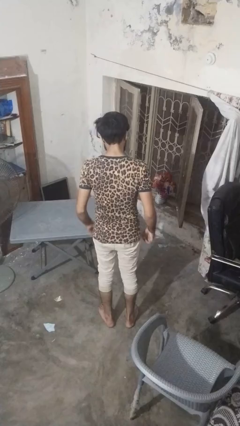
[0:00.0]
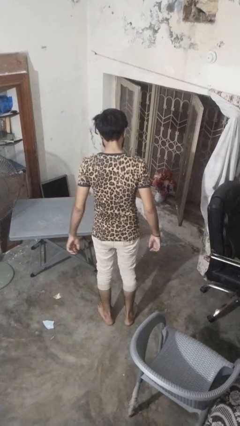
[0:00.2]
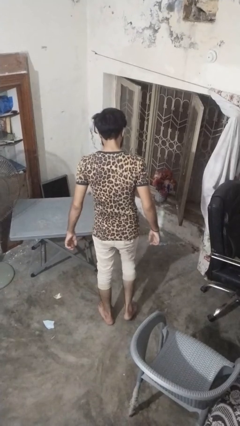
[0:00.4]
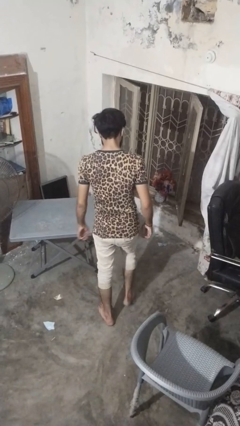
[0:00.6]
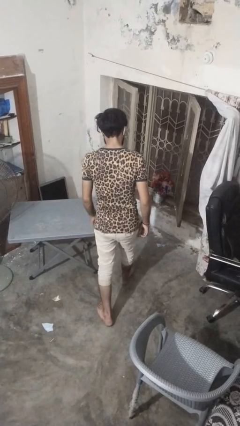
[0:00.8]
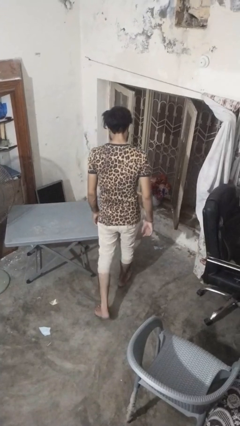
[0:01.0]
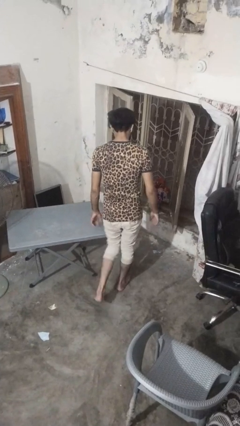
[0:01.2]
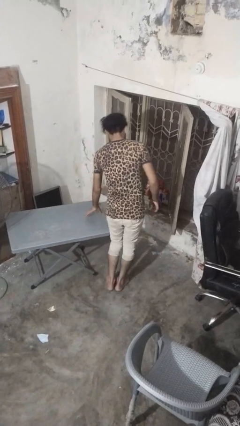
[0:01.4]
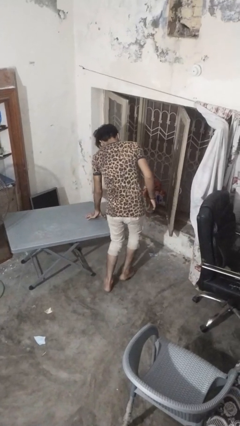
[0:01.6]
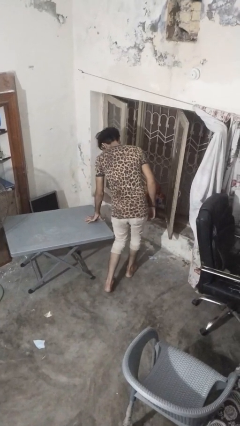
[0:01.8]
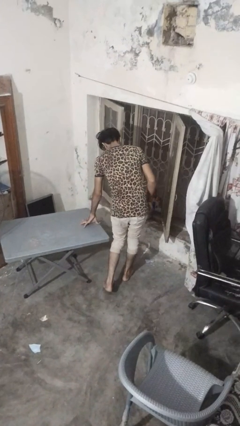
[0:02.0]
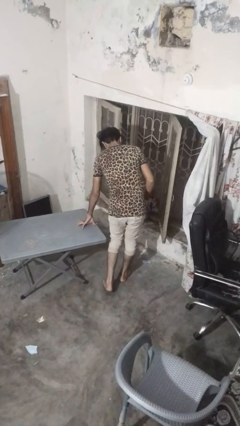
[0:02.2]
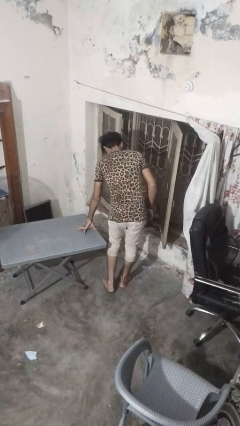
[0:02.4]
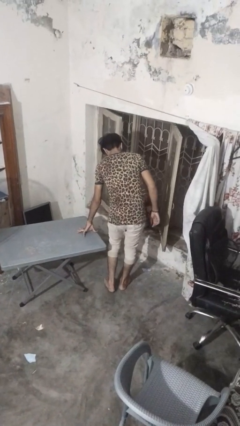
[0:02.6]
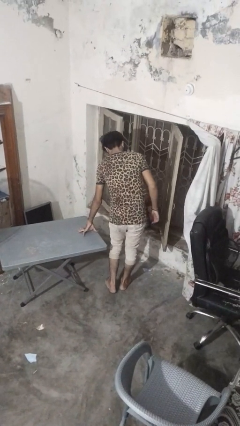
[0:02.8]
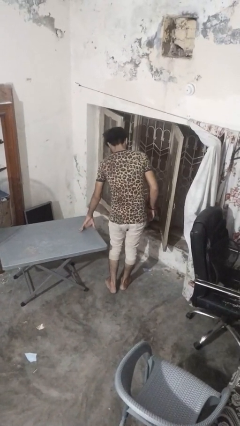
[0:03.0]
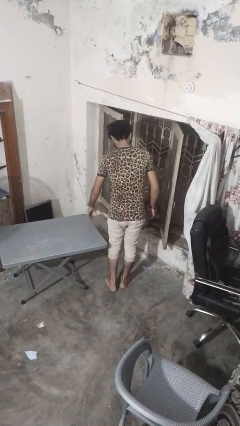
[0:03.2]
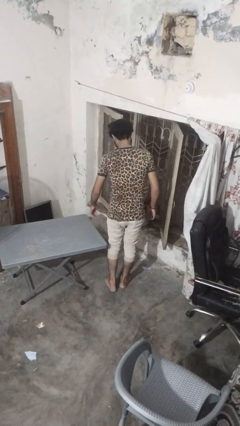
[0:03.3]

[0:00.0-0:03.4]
person bumps into table

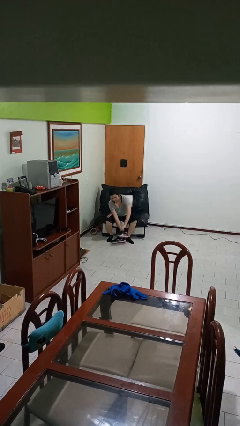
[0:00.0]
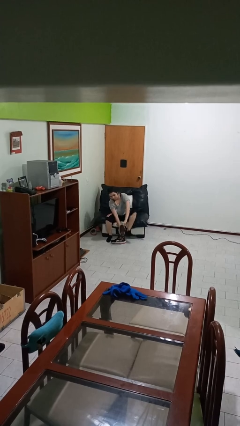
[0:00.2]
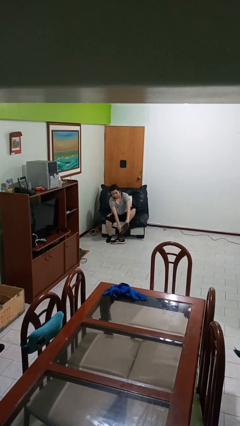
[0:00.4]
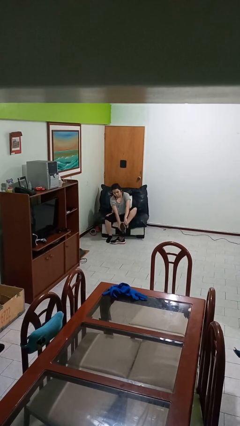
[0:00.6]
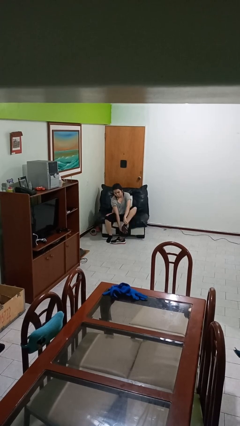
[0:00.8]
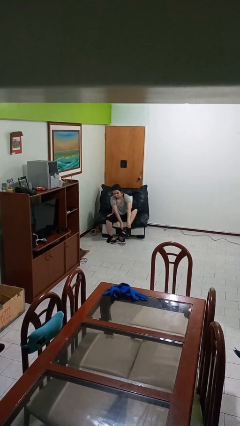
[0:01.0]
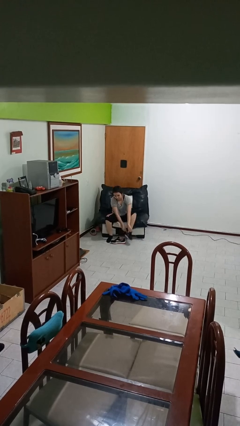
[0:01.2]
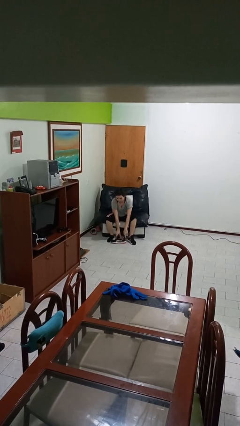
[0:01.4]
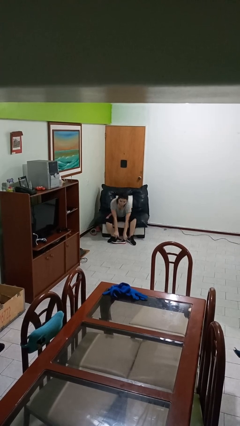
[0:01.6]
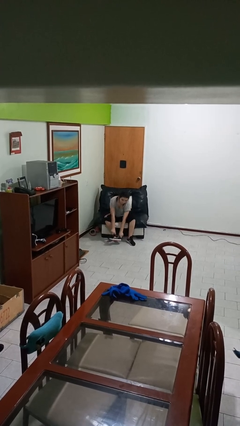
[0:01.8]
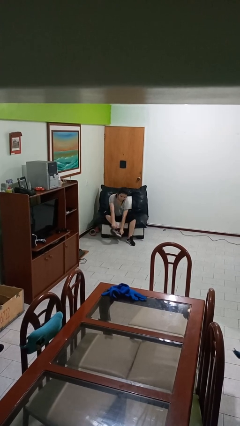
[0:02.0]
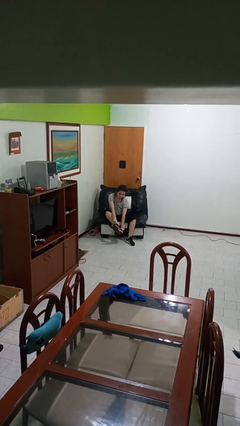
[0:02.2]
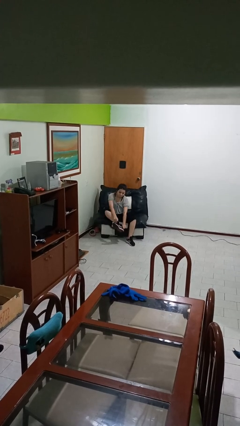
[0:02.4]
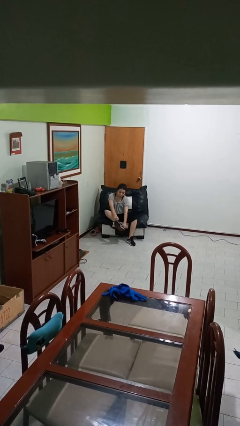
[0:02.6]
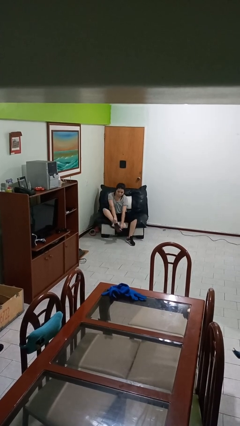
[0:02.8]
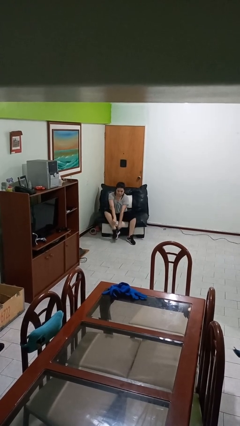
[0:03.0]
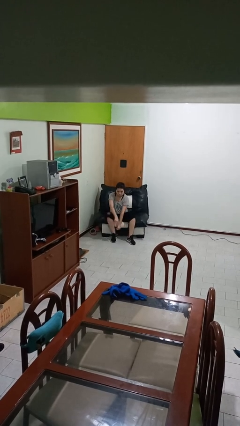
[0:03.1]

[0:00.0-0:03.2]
person puts on shoes

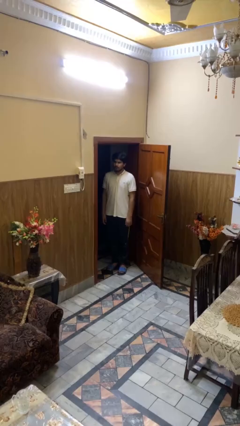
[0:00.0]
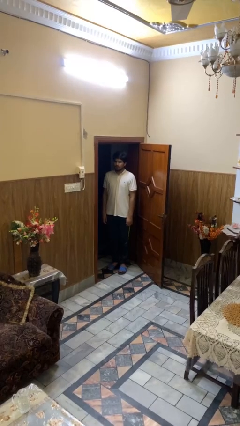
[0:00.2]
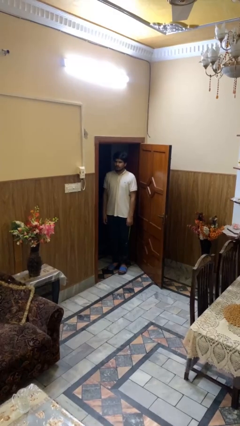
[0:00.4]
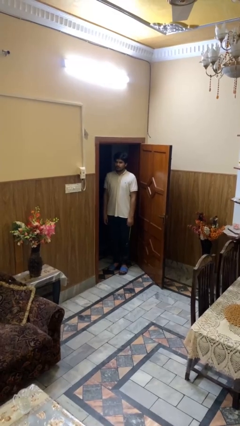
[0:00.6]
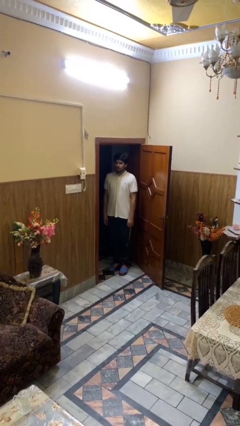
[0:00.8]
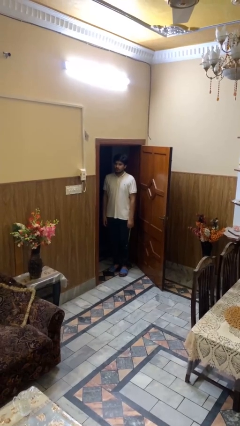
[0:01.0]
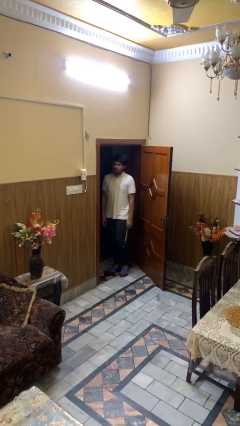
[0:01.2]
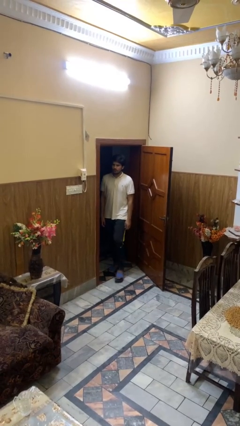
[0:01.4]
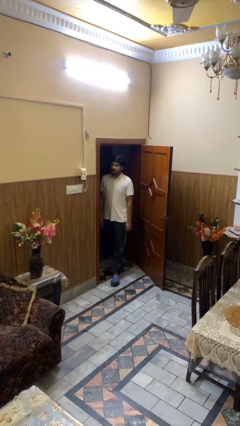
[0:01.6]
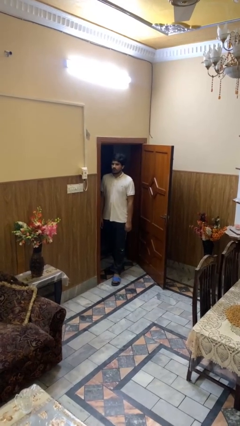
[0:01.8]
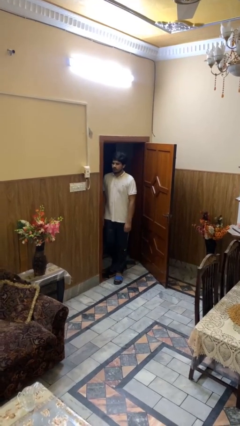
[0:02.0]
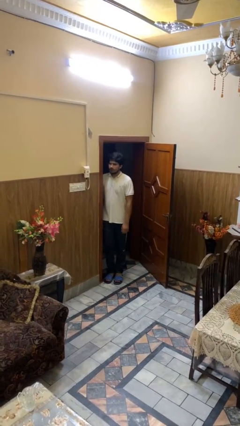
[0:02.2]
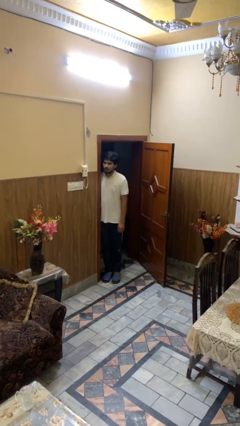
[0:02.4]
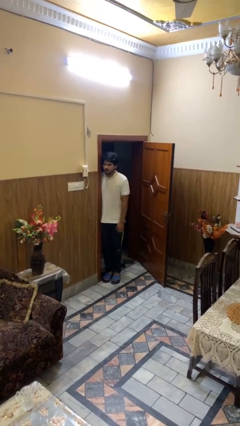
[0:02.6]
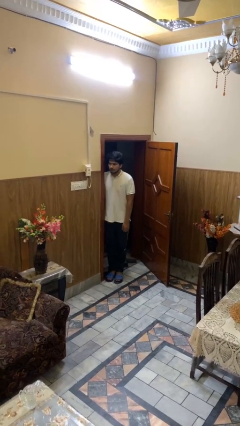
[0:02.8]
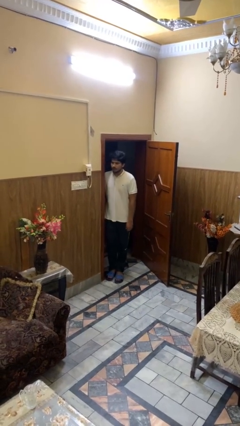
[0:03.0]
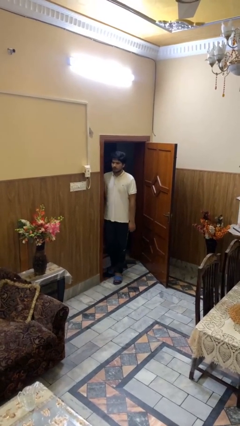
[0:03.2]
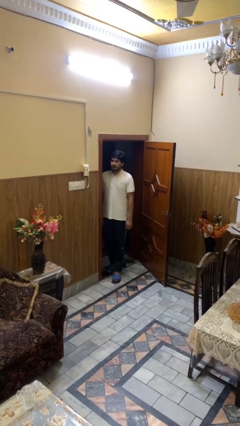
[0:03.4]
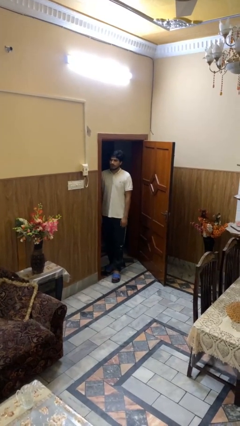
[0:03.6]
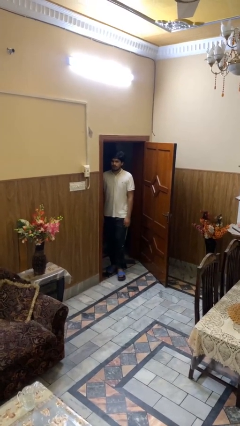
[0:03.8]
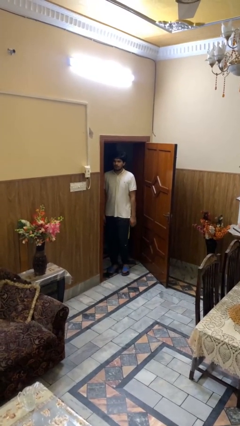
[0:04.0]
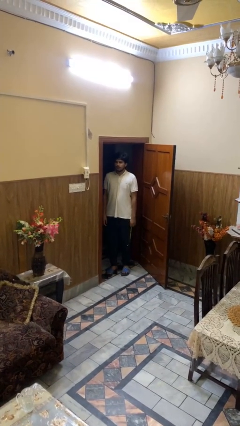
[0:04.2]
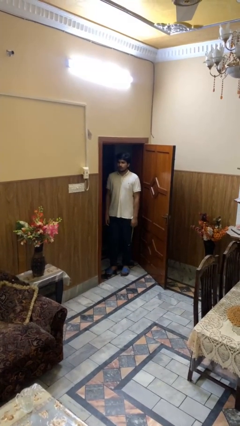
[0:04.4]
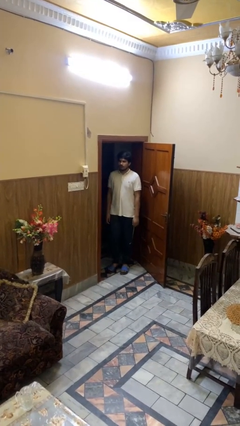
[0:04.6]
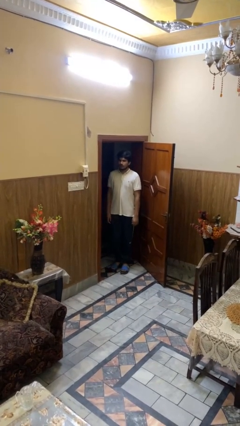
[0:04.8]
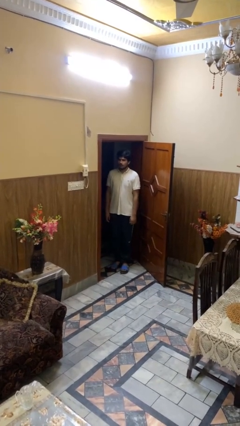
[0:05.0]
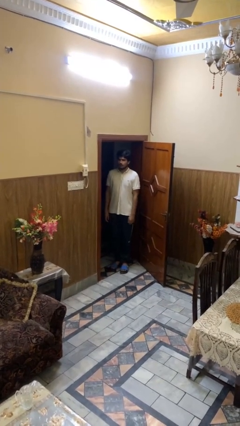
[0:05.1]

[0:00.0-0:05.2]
person bumps into wall

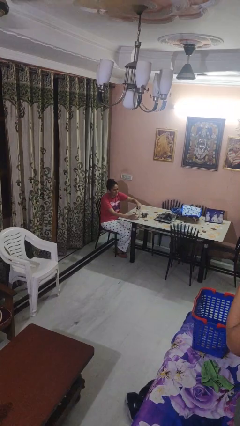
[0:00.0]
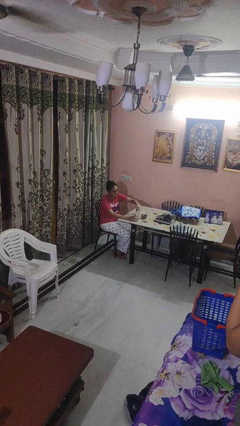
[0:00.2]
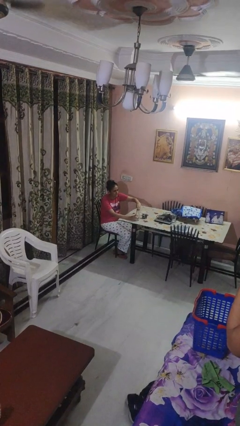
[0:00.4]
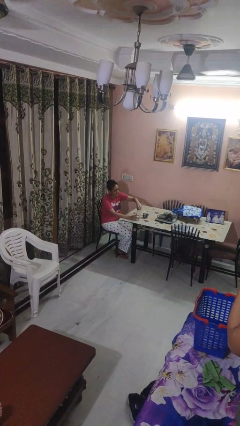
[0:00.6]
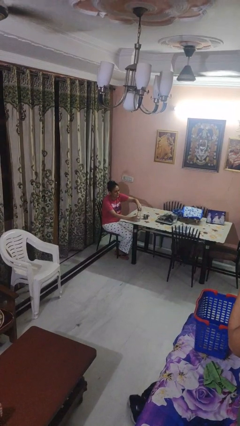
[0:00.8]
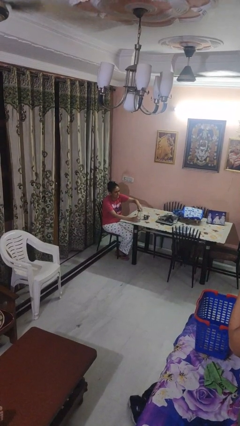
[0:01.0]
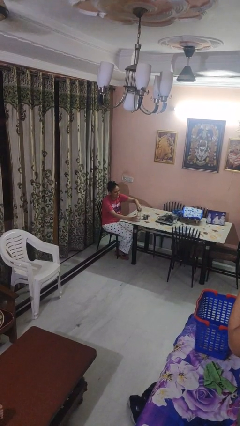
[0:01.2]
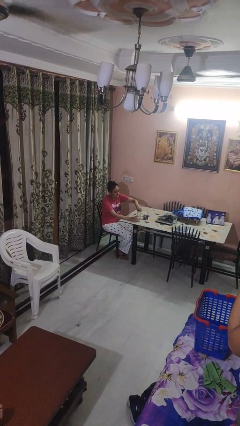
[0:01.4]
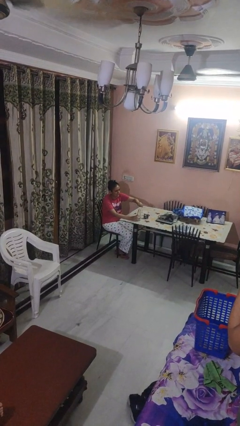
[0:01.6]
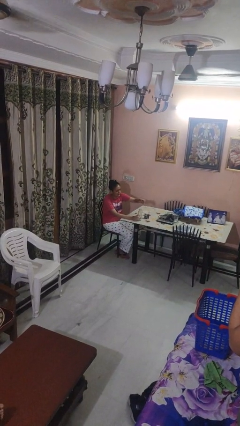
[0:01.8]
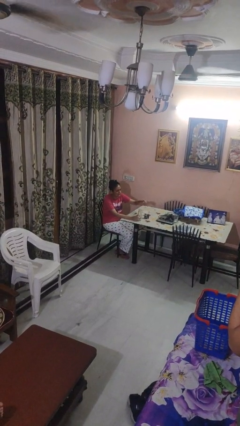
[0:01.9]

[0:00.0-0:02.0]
person unscrews lid from bottle

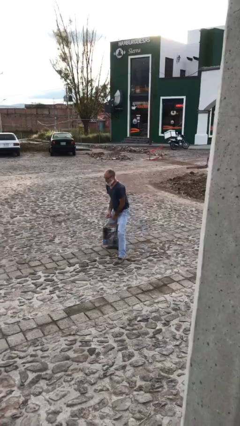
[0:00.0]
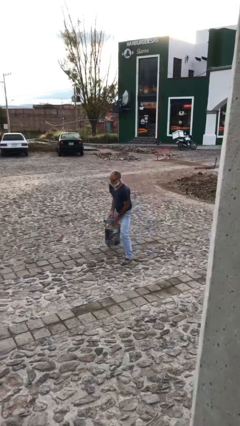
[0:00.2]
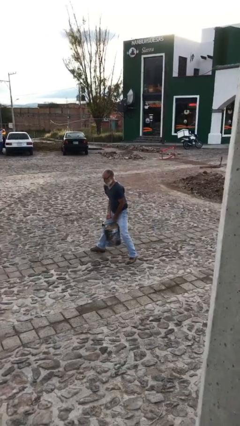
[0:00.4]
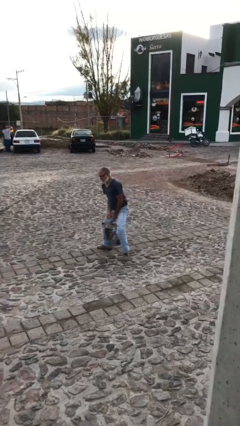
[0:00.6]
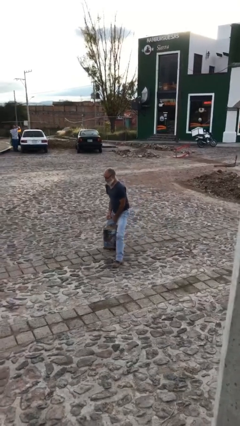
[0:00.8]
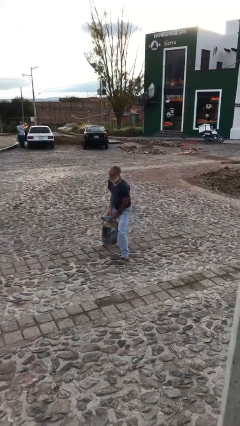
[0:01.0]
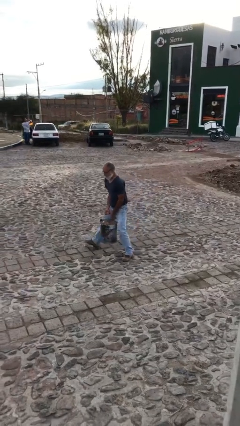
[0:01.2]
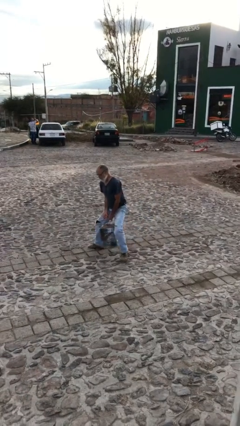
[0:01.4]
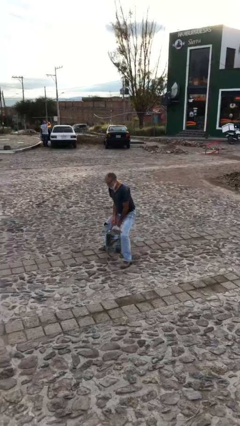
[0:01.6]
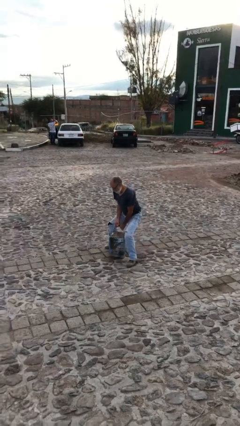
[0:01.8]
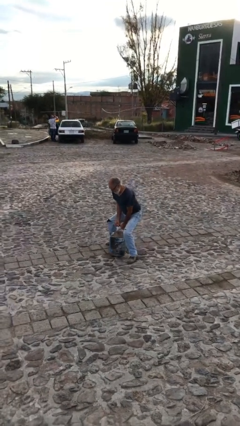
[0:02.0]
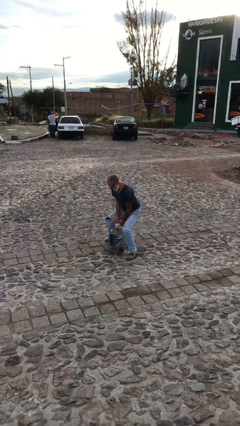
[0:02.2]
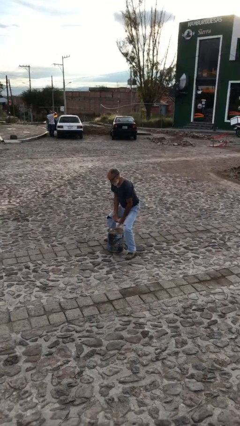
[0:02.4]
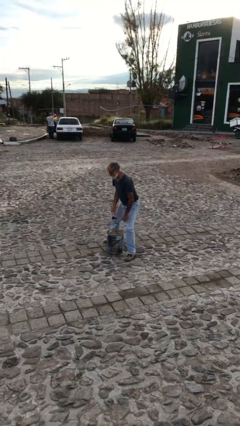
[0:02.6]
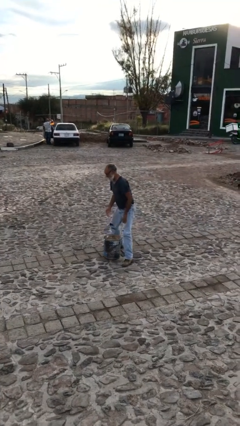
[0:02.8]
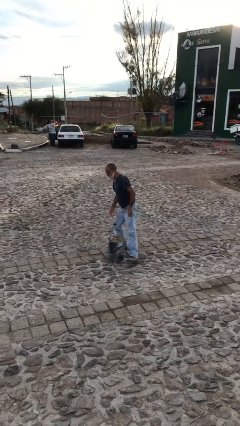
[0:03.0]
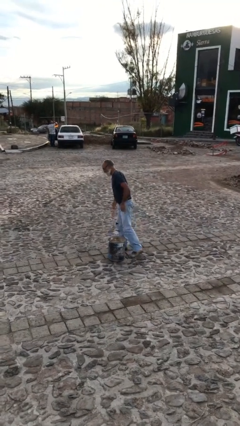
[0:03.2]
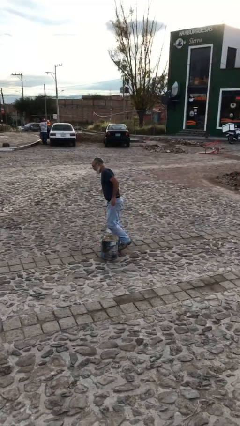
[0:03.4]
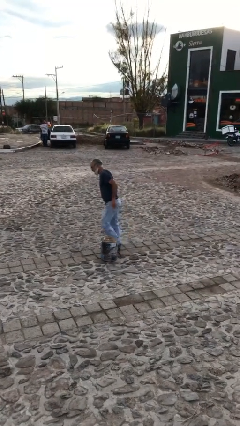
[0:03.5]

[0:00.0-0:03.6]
person puts down object on floor

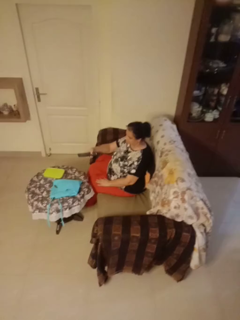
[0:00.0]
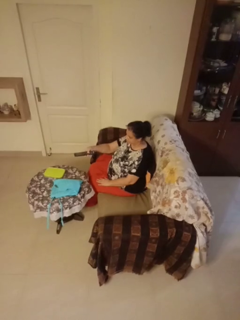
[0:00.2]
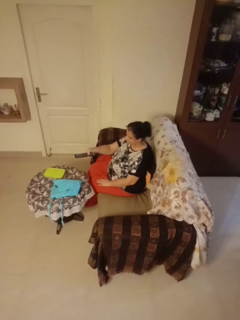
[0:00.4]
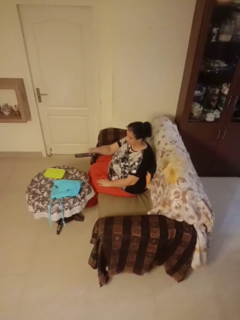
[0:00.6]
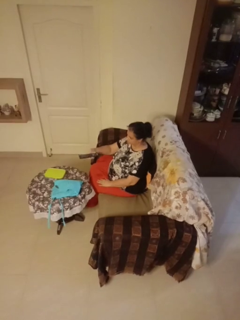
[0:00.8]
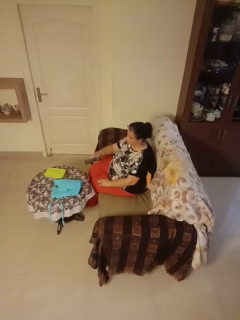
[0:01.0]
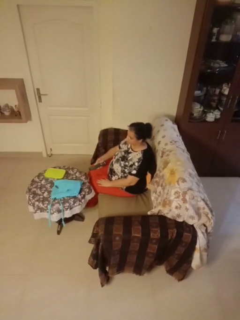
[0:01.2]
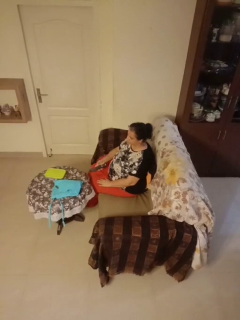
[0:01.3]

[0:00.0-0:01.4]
person uses television remote
